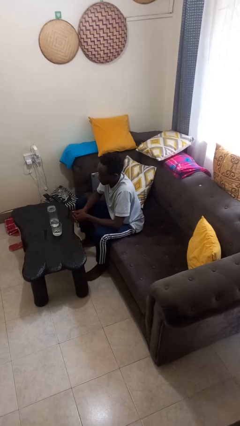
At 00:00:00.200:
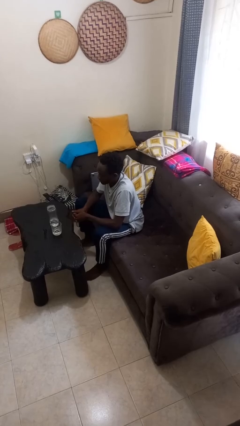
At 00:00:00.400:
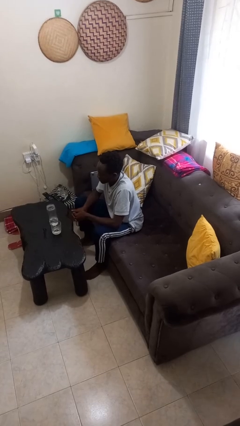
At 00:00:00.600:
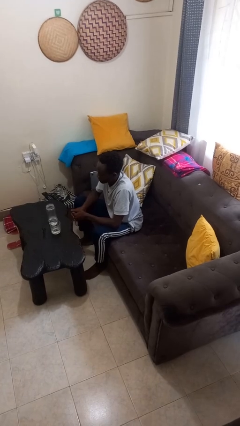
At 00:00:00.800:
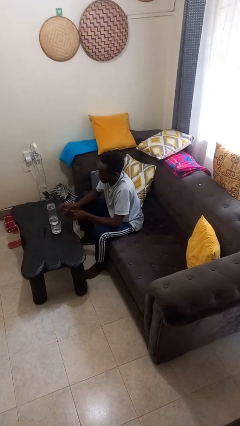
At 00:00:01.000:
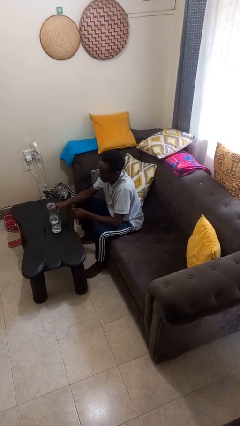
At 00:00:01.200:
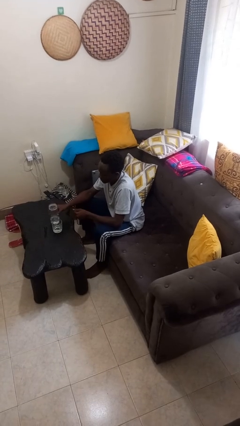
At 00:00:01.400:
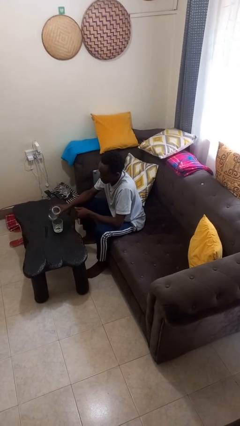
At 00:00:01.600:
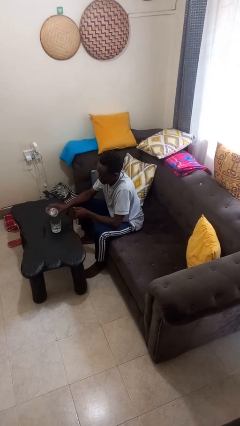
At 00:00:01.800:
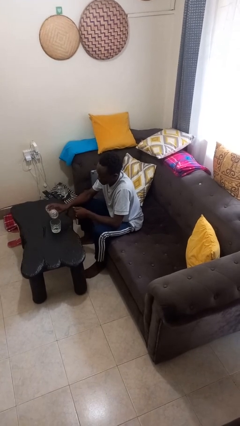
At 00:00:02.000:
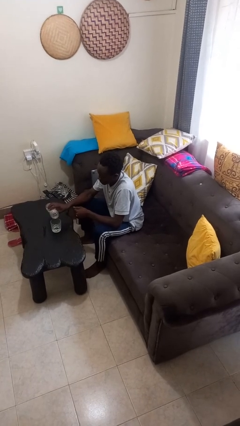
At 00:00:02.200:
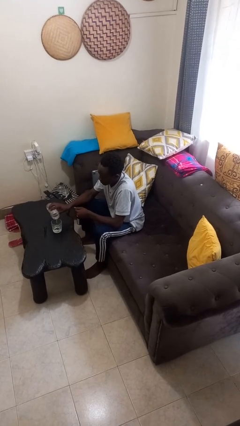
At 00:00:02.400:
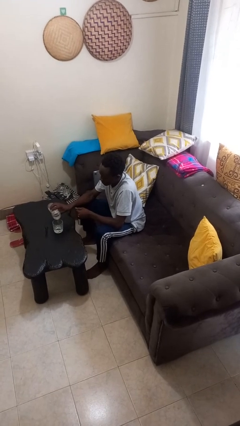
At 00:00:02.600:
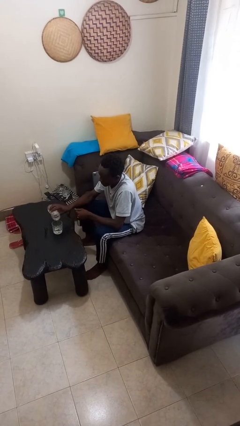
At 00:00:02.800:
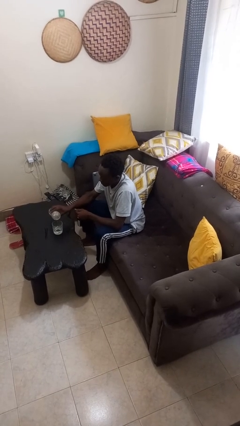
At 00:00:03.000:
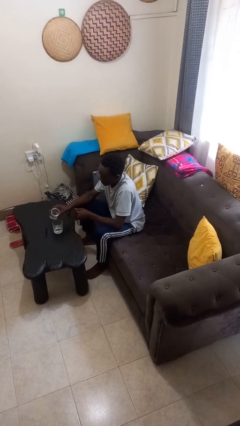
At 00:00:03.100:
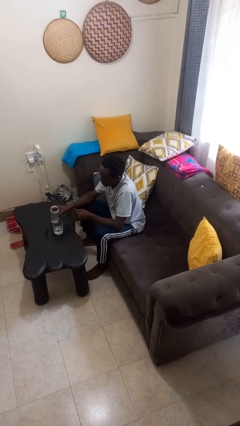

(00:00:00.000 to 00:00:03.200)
person pours liquid into cup

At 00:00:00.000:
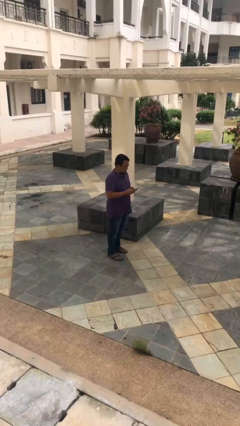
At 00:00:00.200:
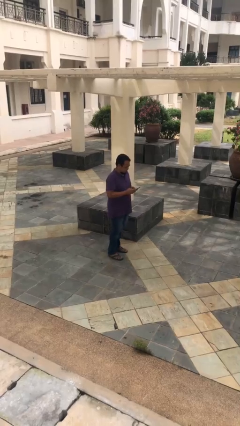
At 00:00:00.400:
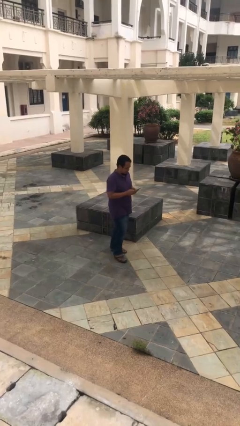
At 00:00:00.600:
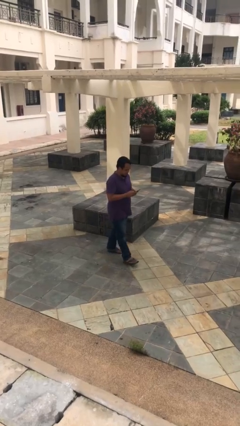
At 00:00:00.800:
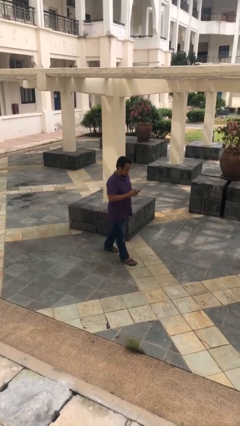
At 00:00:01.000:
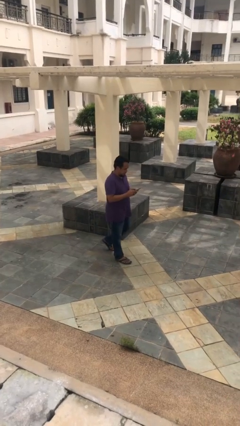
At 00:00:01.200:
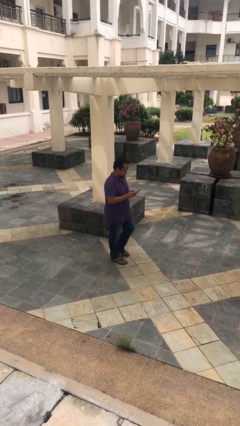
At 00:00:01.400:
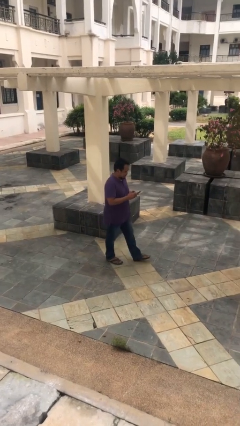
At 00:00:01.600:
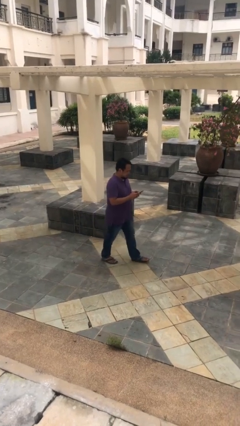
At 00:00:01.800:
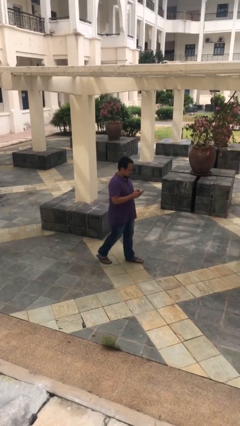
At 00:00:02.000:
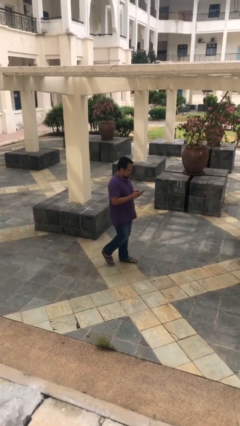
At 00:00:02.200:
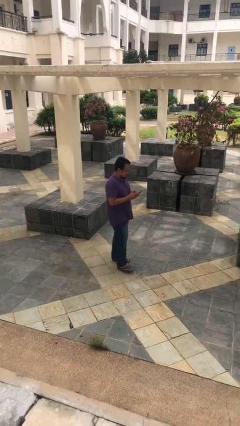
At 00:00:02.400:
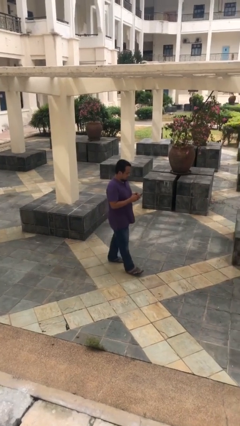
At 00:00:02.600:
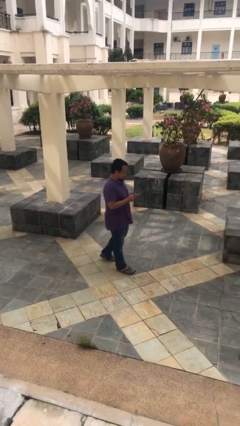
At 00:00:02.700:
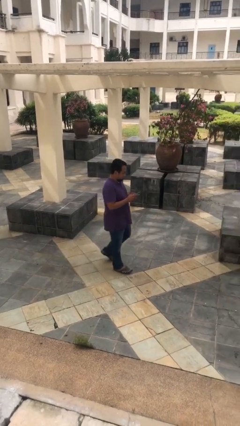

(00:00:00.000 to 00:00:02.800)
person texts on phone

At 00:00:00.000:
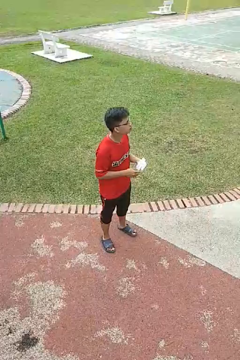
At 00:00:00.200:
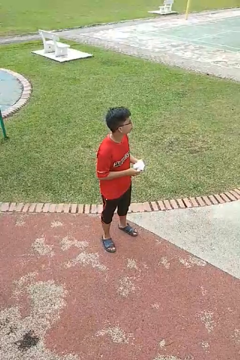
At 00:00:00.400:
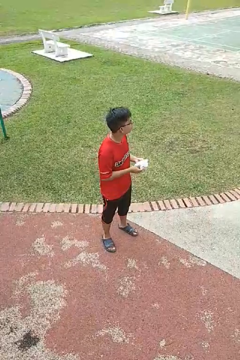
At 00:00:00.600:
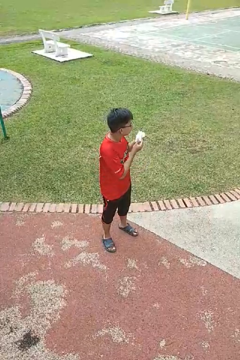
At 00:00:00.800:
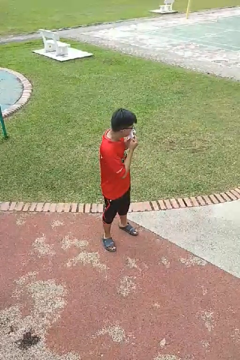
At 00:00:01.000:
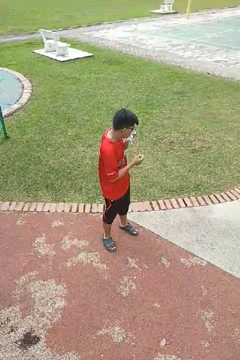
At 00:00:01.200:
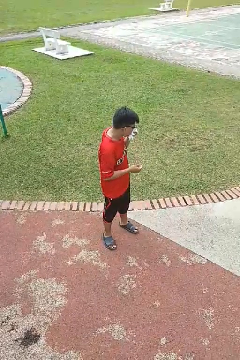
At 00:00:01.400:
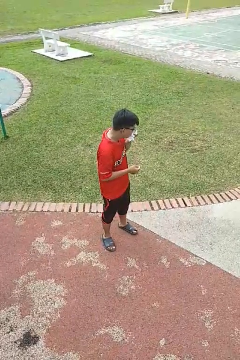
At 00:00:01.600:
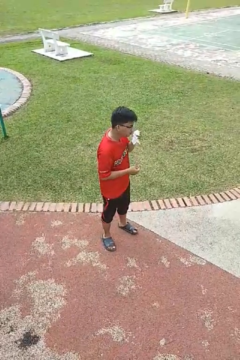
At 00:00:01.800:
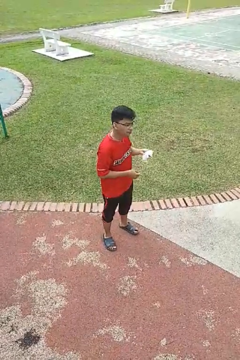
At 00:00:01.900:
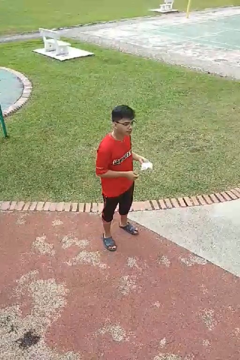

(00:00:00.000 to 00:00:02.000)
person blows nose

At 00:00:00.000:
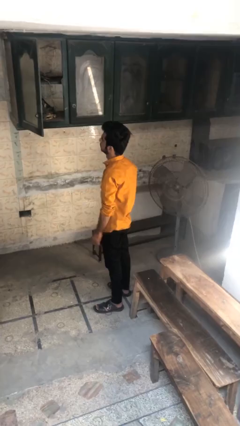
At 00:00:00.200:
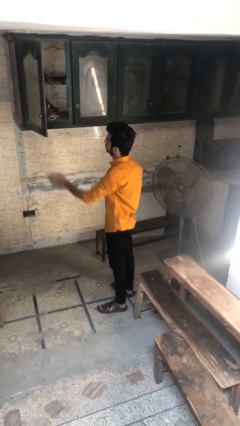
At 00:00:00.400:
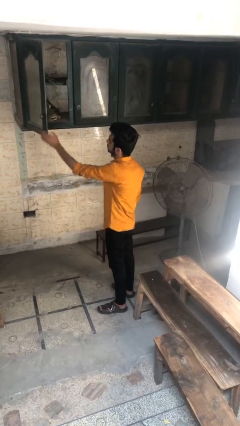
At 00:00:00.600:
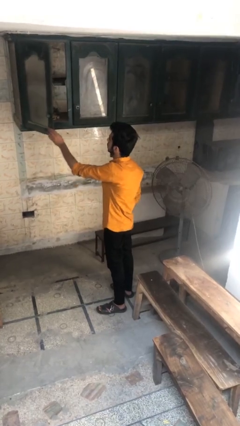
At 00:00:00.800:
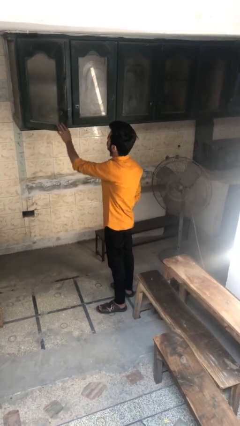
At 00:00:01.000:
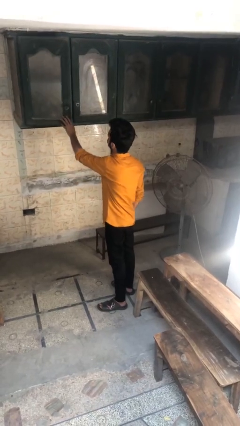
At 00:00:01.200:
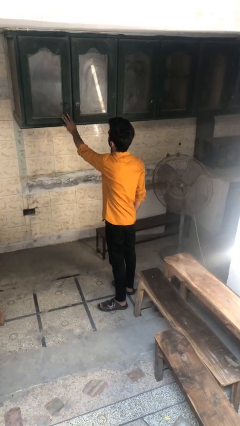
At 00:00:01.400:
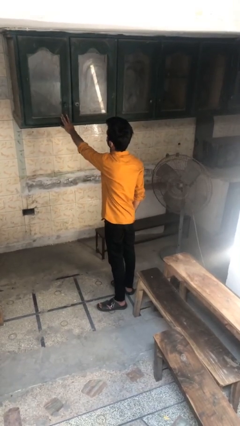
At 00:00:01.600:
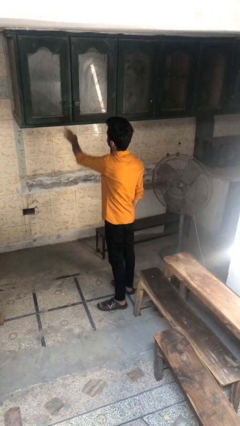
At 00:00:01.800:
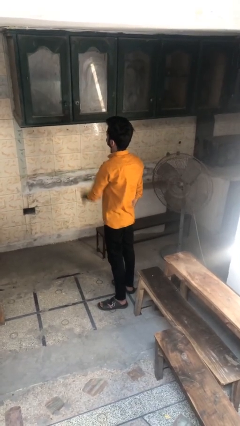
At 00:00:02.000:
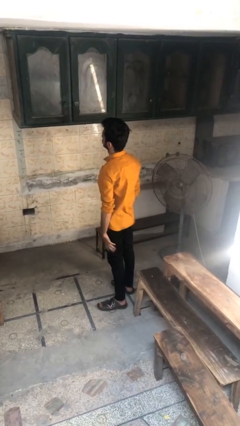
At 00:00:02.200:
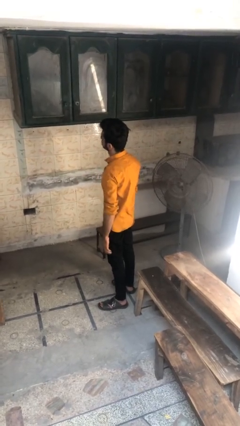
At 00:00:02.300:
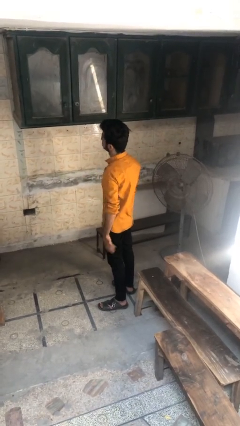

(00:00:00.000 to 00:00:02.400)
person closes cabinet

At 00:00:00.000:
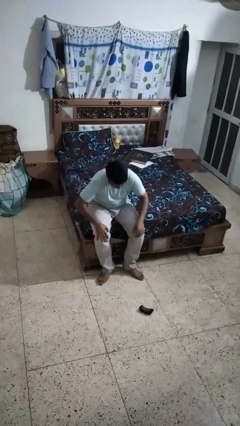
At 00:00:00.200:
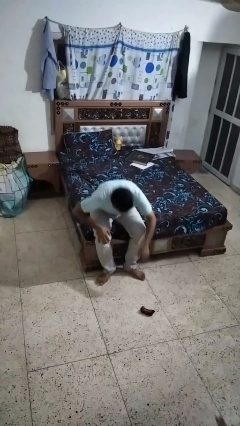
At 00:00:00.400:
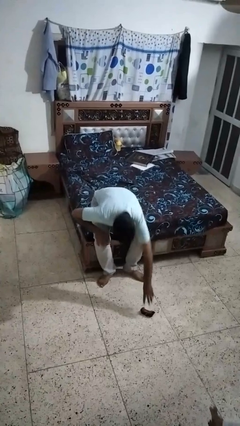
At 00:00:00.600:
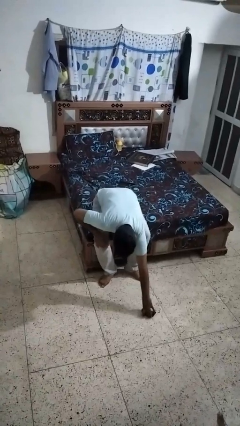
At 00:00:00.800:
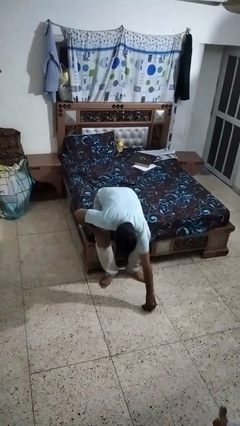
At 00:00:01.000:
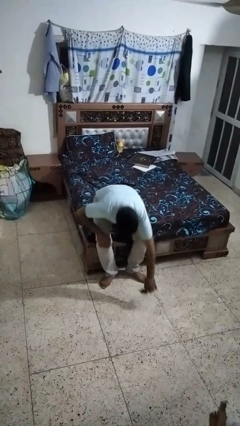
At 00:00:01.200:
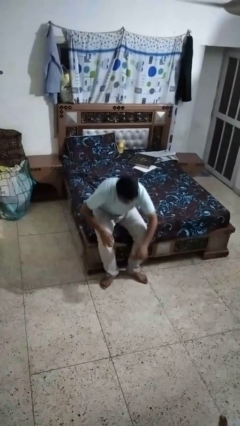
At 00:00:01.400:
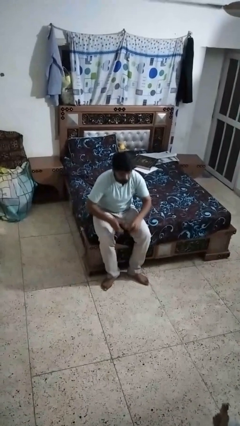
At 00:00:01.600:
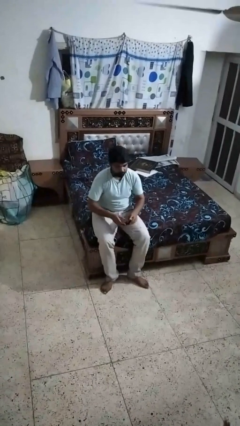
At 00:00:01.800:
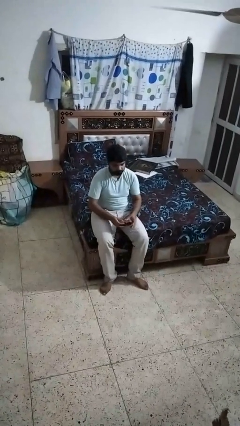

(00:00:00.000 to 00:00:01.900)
person picks up object from floor

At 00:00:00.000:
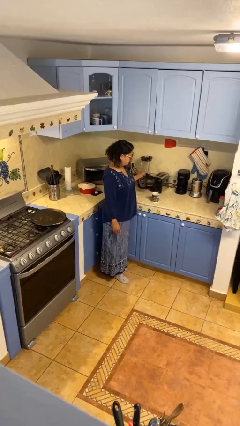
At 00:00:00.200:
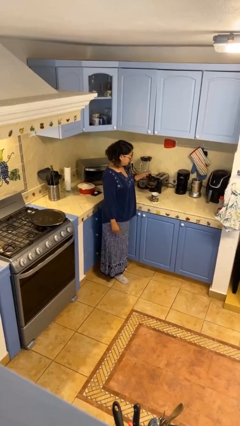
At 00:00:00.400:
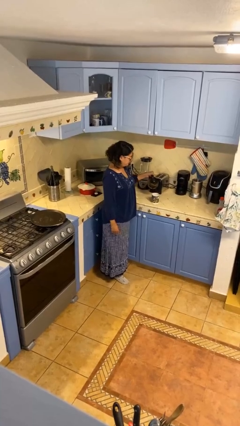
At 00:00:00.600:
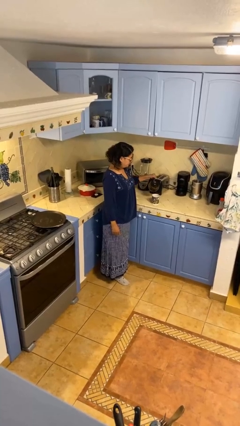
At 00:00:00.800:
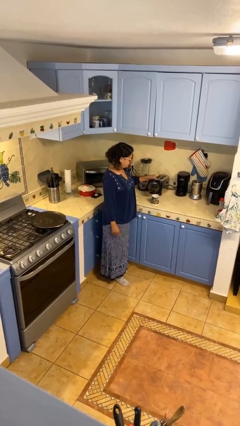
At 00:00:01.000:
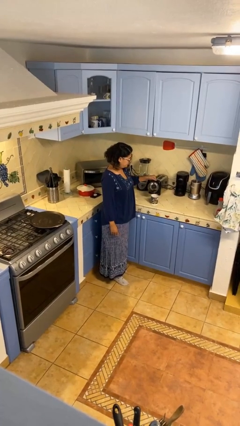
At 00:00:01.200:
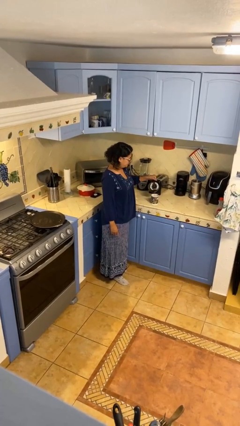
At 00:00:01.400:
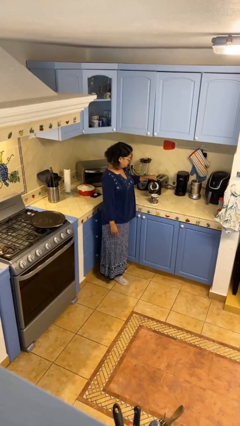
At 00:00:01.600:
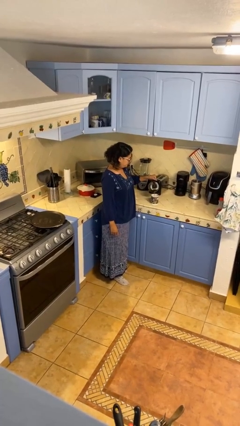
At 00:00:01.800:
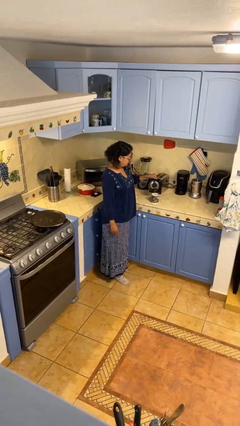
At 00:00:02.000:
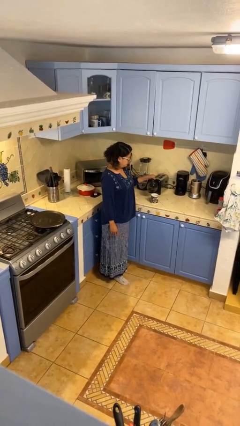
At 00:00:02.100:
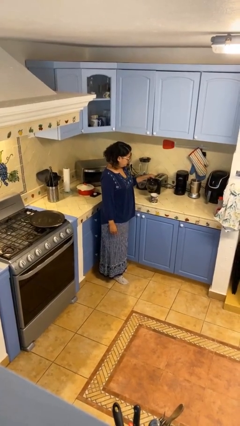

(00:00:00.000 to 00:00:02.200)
person pours coffee into mug

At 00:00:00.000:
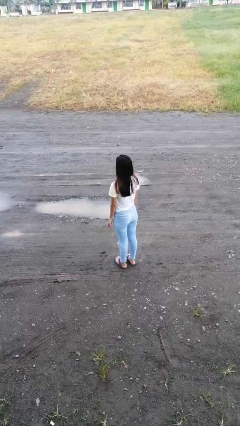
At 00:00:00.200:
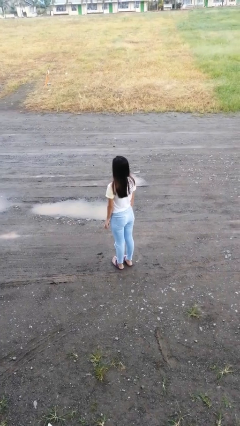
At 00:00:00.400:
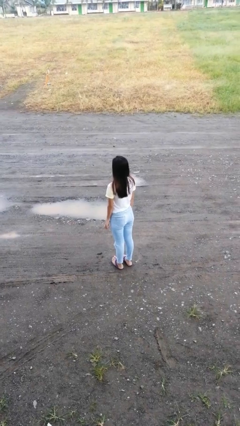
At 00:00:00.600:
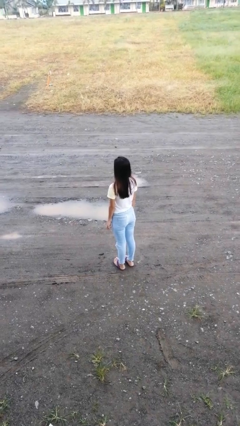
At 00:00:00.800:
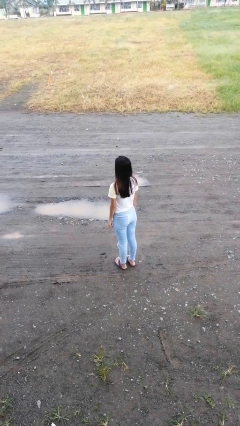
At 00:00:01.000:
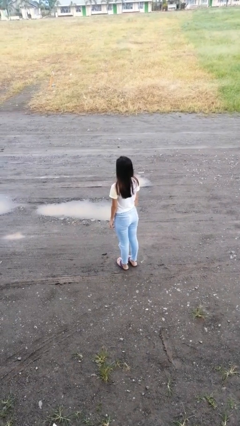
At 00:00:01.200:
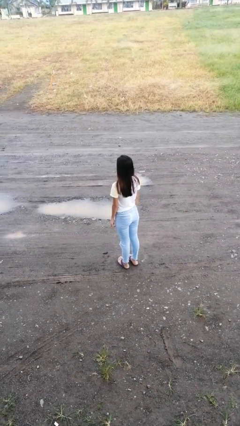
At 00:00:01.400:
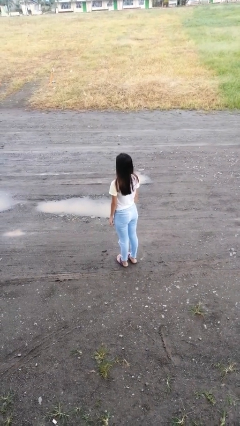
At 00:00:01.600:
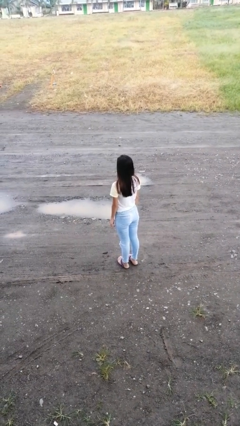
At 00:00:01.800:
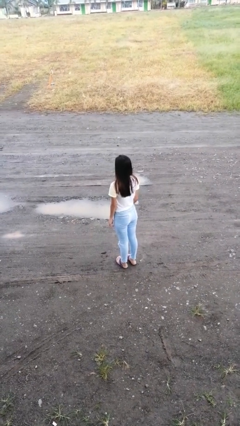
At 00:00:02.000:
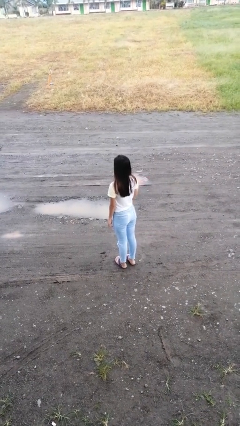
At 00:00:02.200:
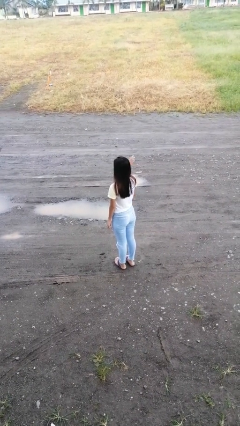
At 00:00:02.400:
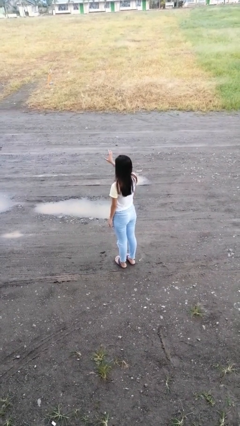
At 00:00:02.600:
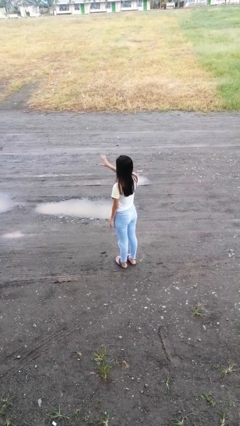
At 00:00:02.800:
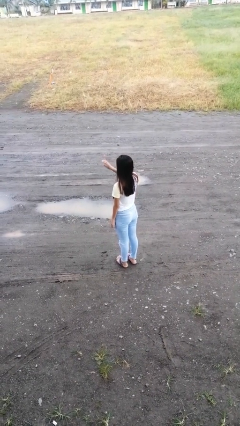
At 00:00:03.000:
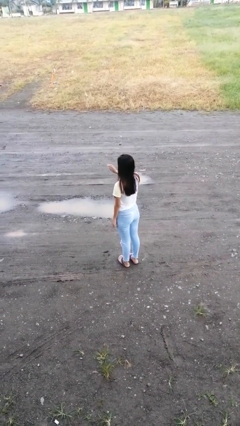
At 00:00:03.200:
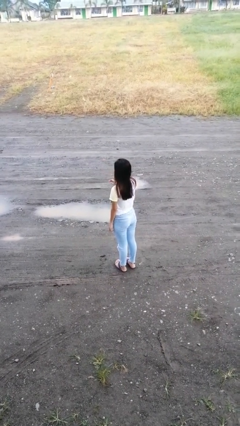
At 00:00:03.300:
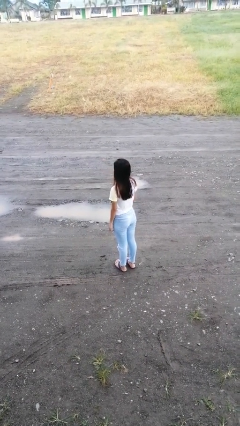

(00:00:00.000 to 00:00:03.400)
person gestures swipe left
